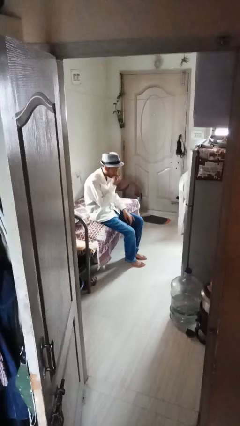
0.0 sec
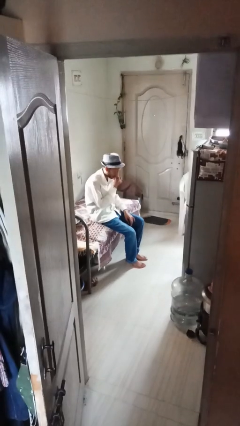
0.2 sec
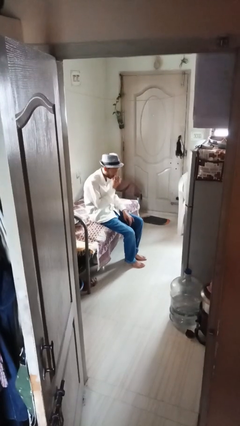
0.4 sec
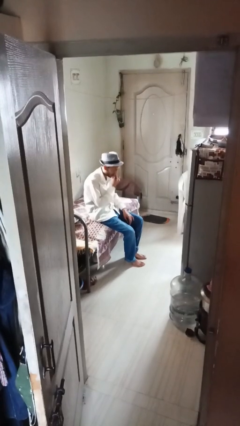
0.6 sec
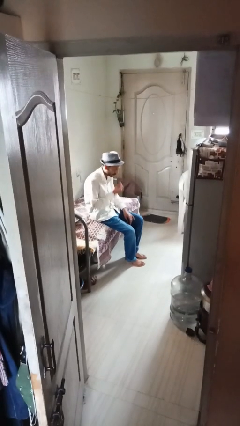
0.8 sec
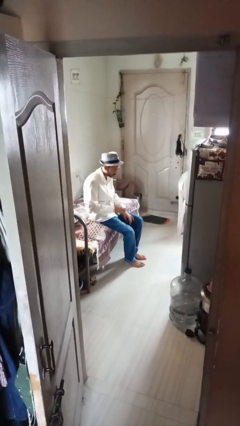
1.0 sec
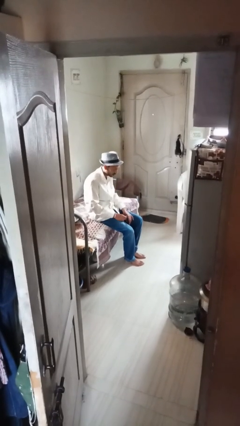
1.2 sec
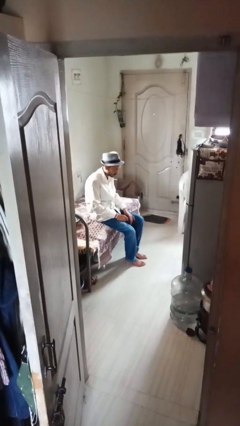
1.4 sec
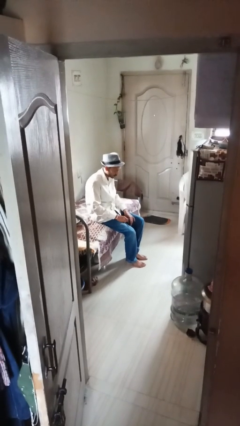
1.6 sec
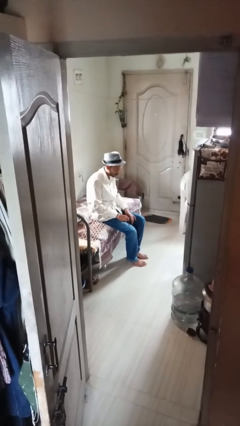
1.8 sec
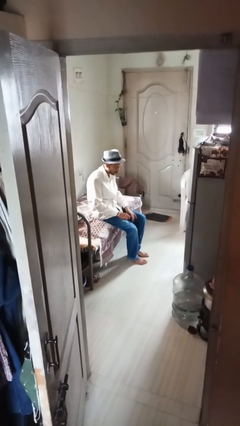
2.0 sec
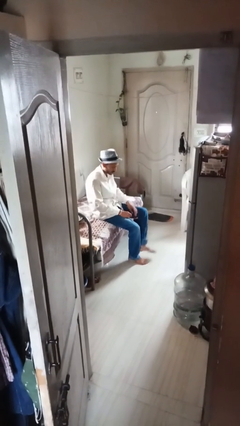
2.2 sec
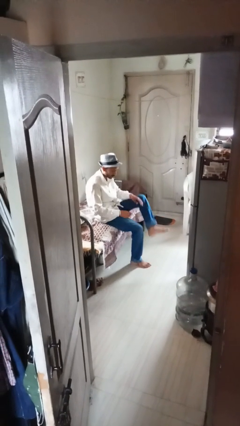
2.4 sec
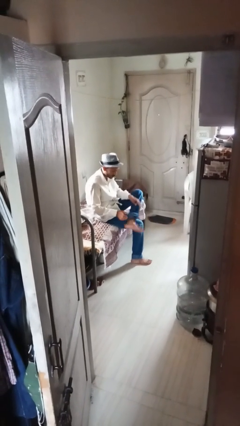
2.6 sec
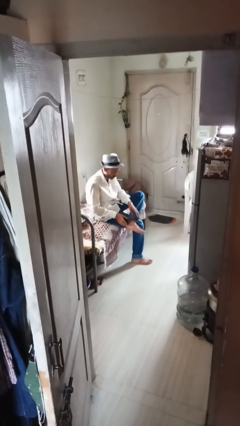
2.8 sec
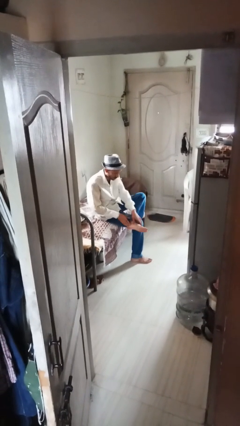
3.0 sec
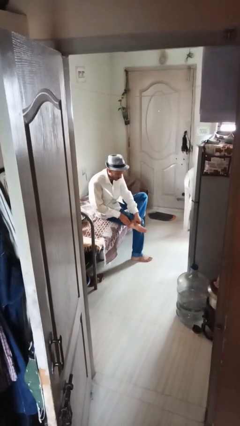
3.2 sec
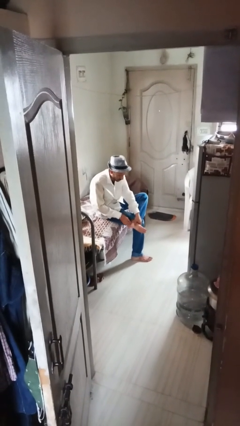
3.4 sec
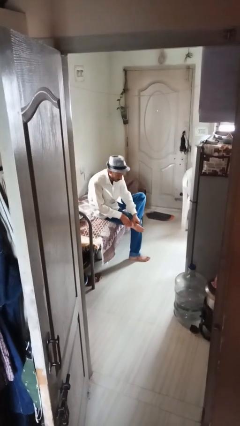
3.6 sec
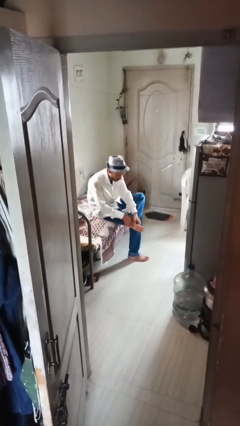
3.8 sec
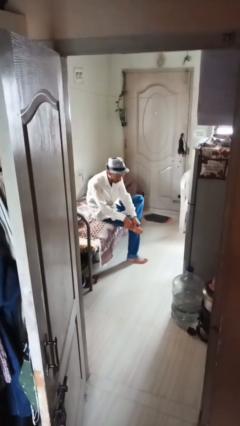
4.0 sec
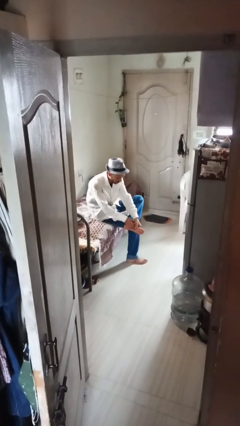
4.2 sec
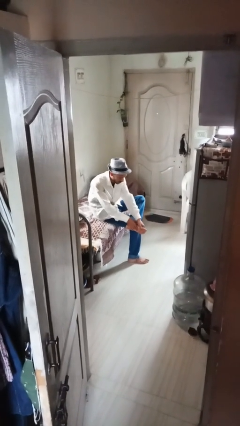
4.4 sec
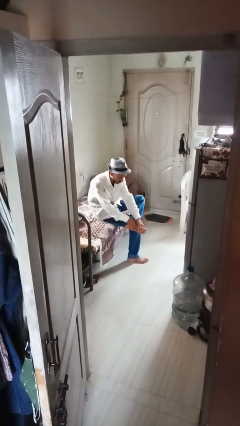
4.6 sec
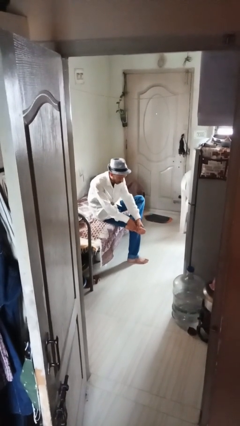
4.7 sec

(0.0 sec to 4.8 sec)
person rubs foot

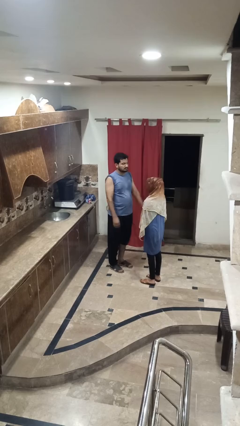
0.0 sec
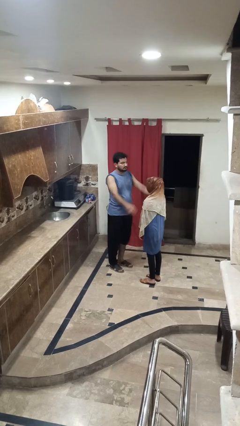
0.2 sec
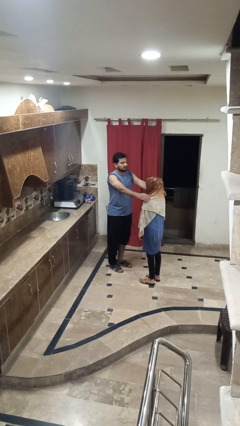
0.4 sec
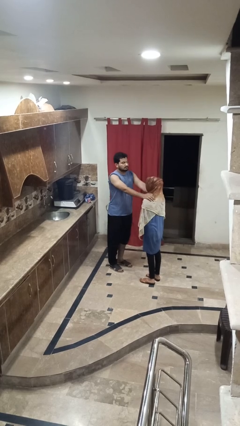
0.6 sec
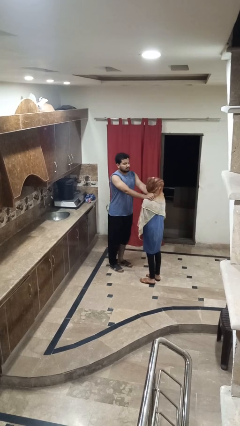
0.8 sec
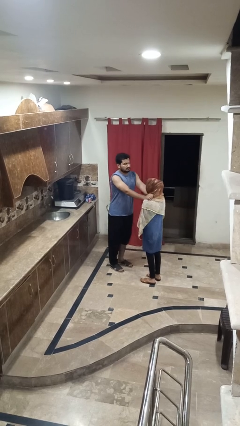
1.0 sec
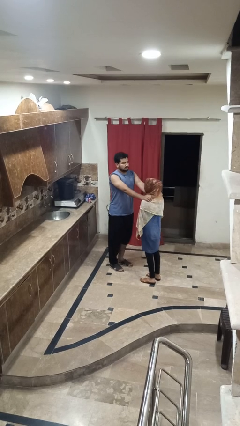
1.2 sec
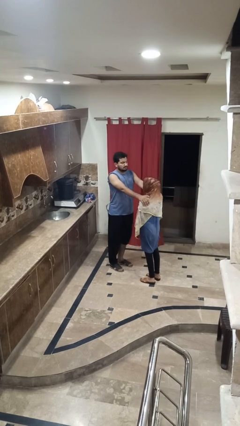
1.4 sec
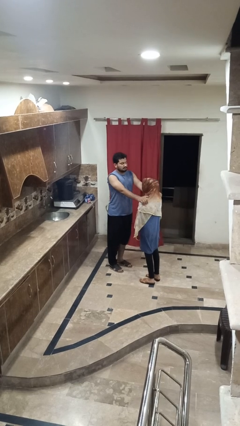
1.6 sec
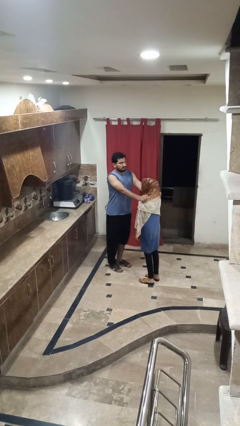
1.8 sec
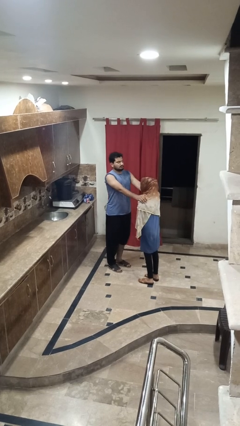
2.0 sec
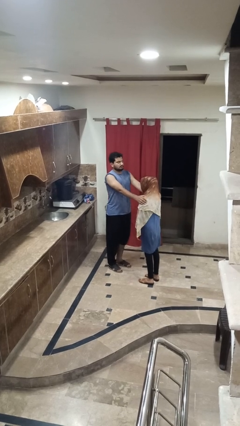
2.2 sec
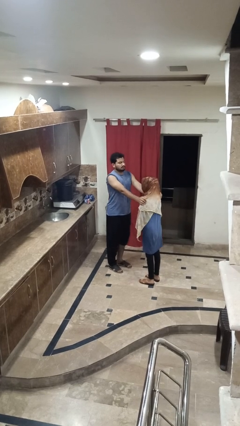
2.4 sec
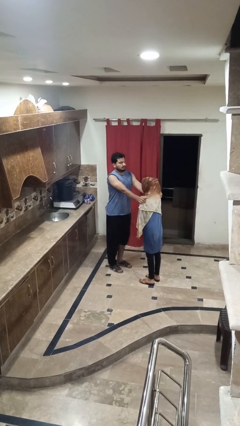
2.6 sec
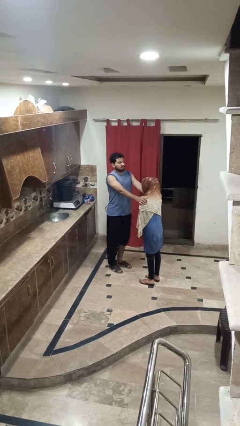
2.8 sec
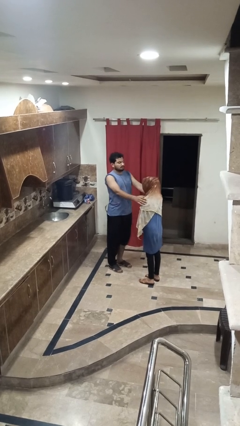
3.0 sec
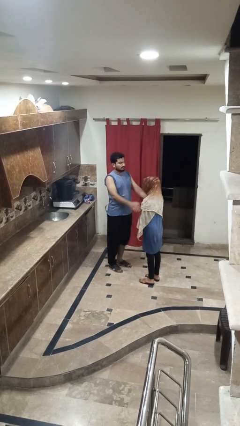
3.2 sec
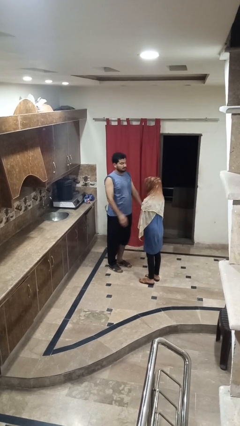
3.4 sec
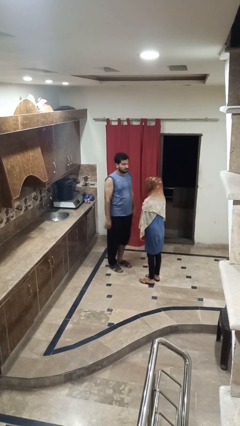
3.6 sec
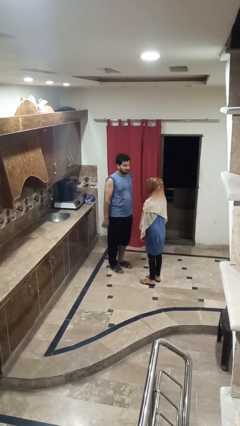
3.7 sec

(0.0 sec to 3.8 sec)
person pounds shoulders of person

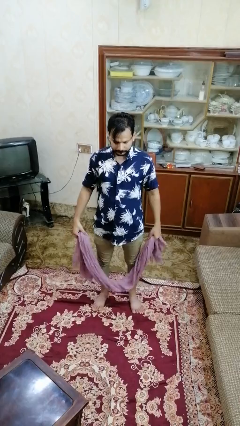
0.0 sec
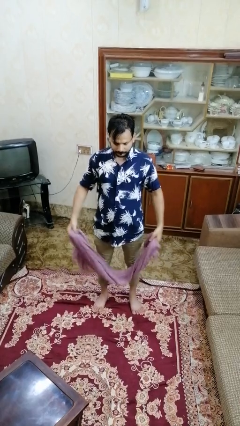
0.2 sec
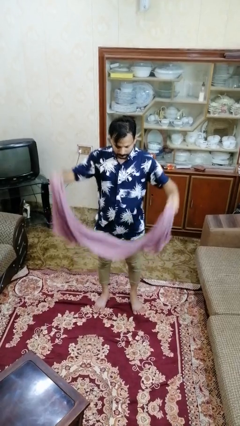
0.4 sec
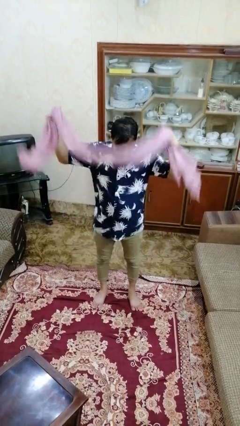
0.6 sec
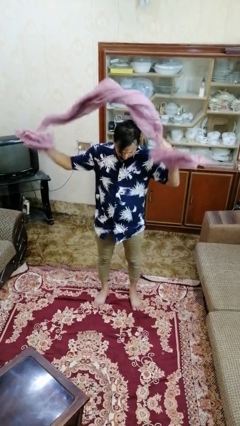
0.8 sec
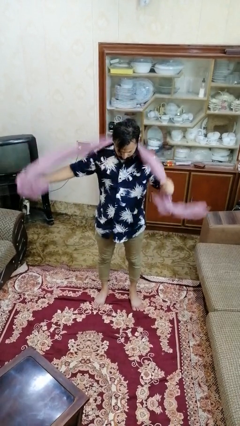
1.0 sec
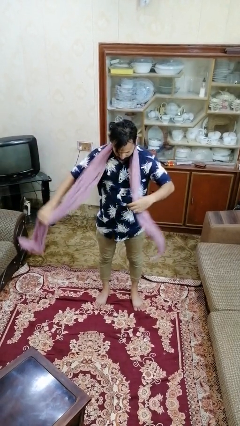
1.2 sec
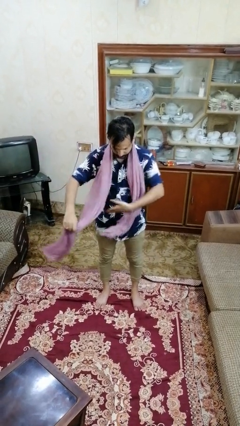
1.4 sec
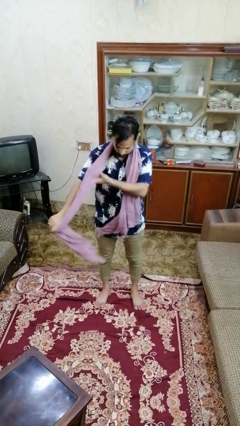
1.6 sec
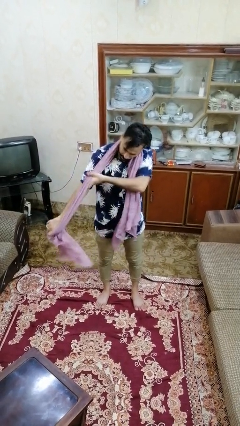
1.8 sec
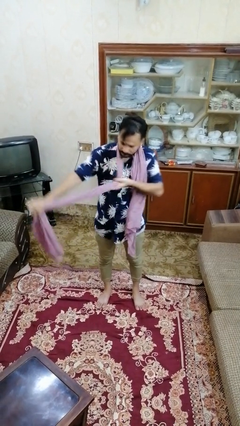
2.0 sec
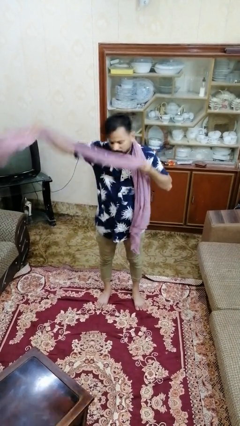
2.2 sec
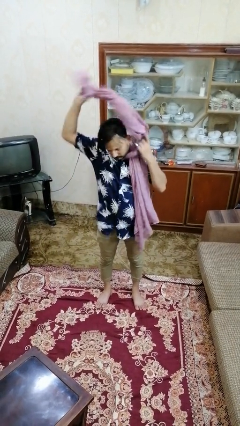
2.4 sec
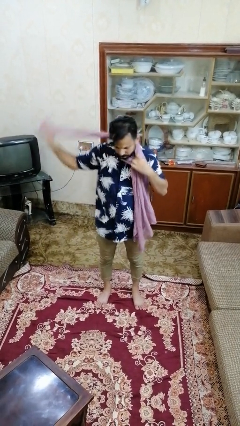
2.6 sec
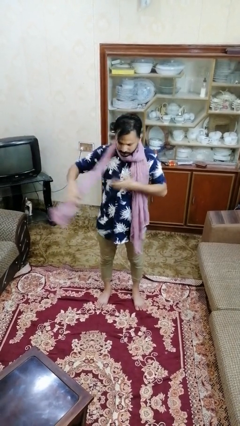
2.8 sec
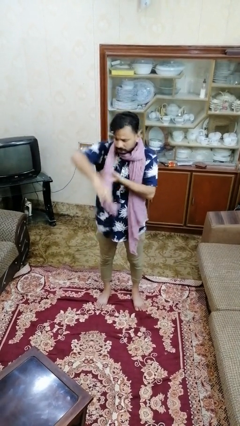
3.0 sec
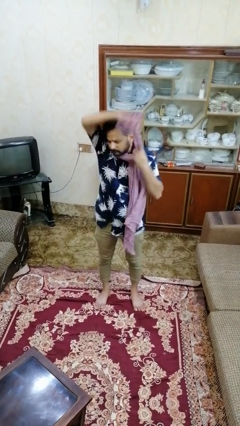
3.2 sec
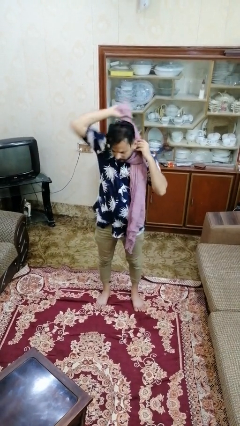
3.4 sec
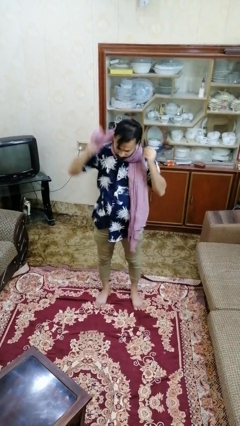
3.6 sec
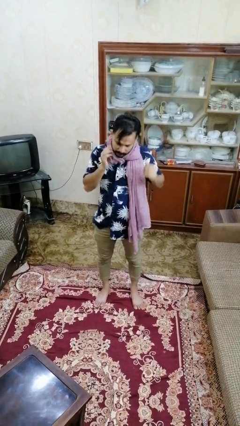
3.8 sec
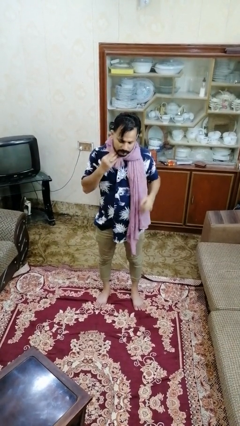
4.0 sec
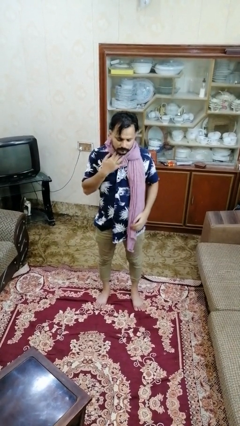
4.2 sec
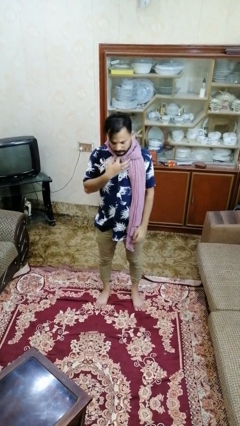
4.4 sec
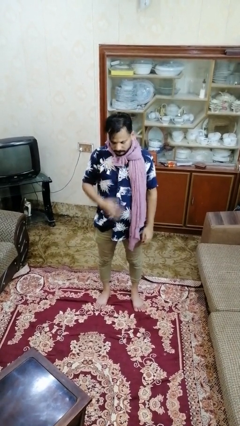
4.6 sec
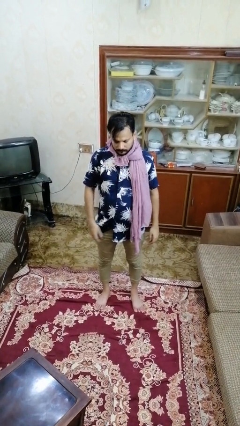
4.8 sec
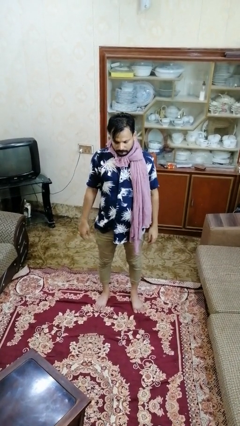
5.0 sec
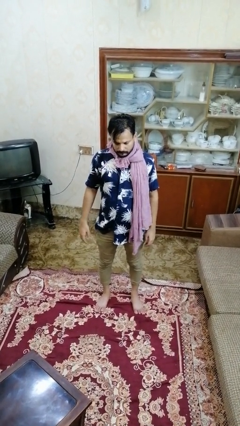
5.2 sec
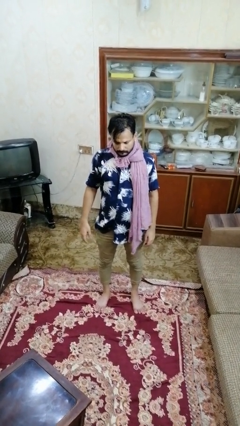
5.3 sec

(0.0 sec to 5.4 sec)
person puts on scarf

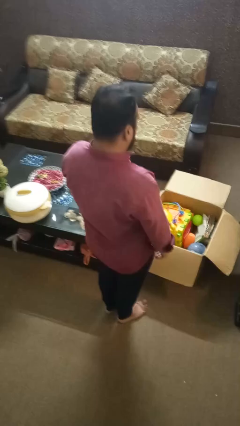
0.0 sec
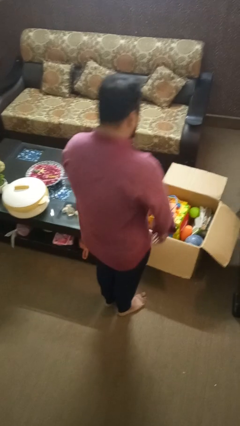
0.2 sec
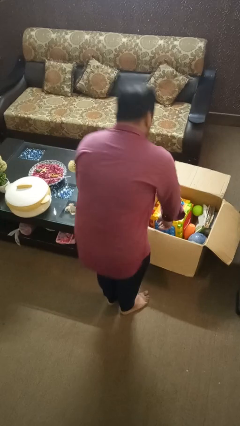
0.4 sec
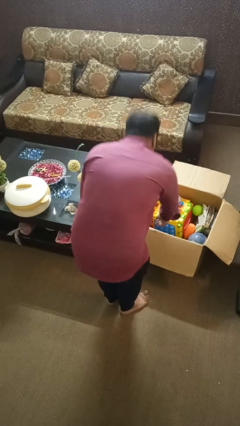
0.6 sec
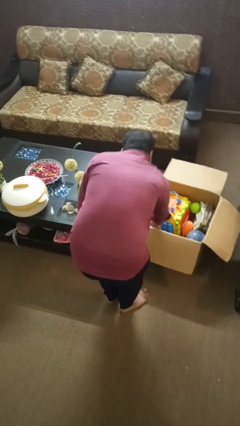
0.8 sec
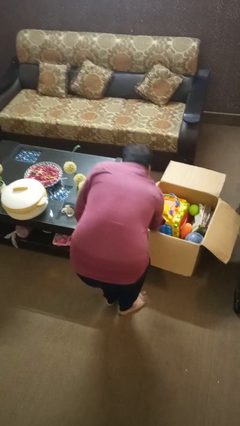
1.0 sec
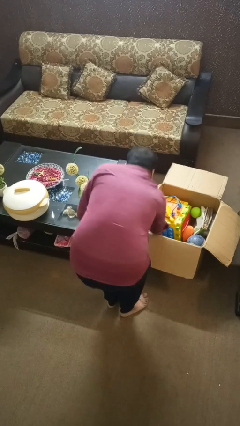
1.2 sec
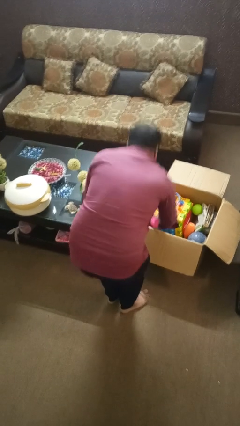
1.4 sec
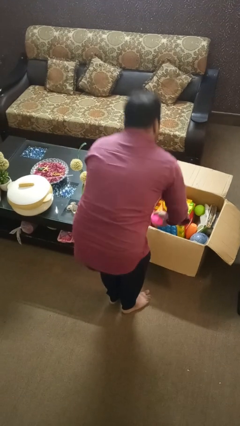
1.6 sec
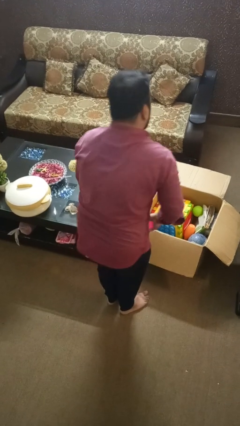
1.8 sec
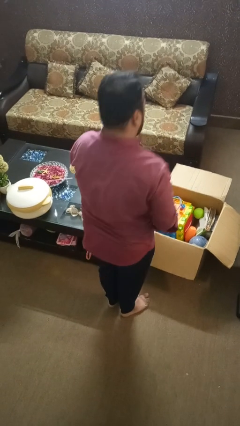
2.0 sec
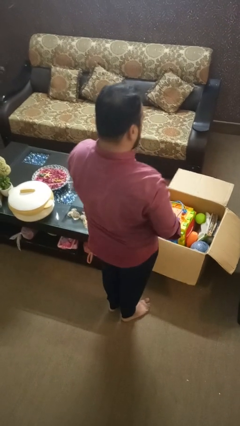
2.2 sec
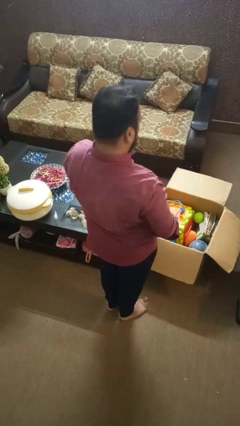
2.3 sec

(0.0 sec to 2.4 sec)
person takes object from box

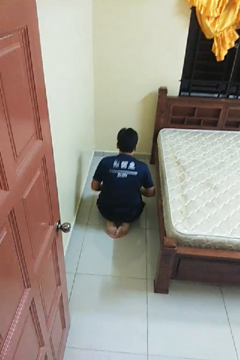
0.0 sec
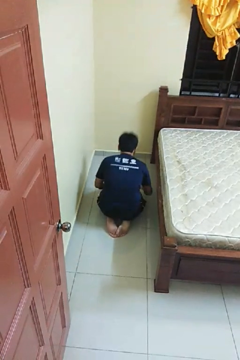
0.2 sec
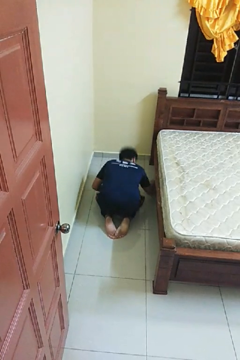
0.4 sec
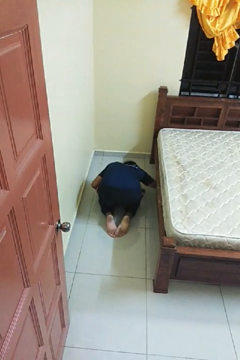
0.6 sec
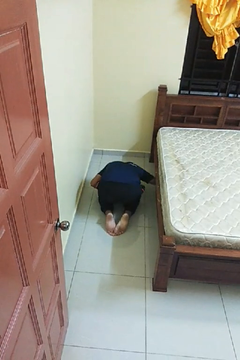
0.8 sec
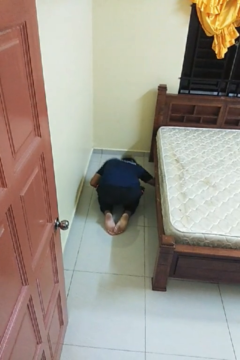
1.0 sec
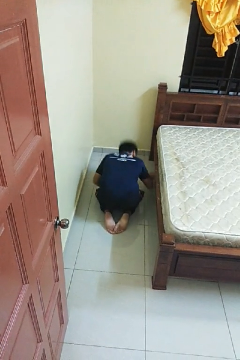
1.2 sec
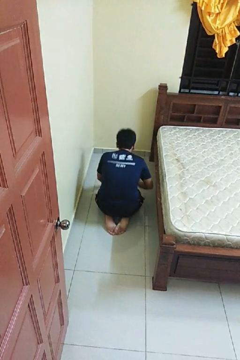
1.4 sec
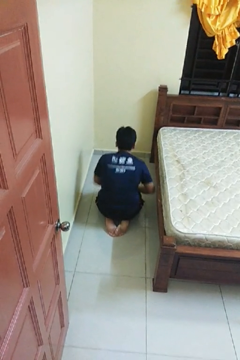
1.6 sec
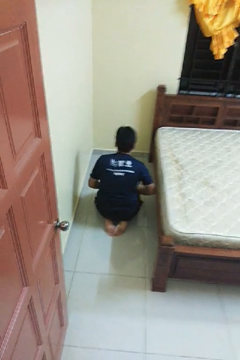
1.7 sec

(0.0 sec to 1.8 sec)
person searches under bed

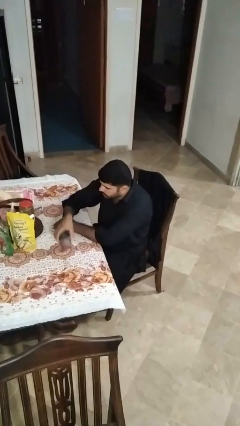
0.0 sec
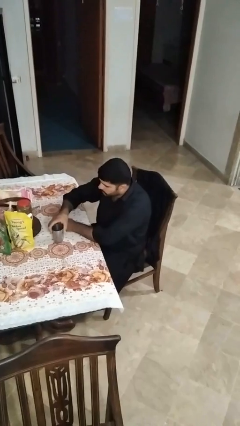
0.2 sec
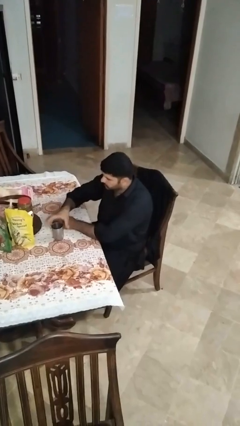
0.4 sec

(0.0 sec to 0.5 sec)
person sets upright glass
